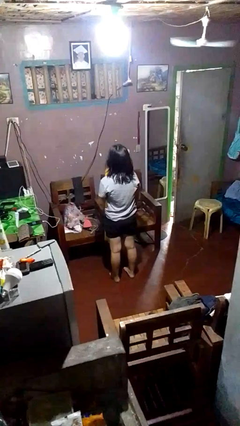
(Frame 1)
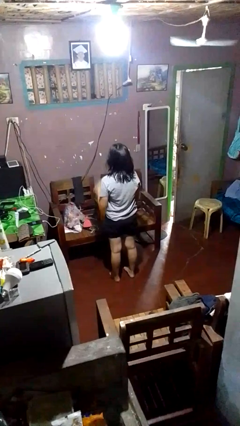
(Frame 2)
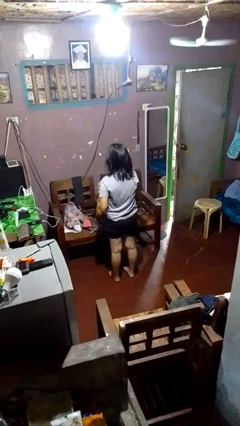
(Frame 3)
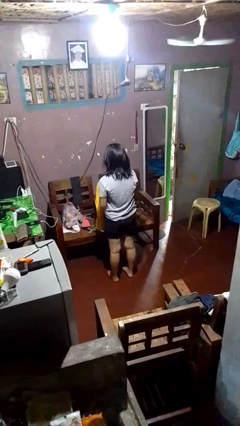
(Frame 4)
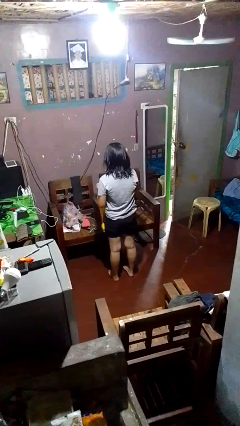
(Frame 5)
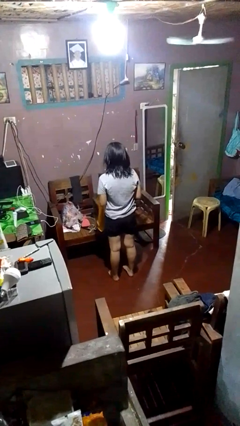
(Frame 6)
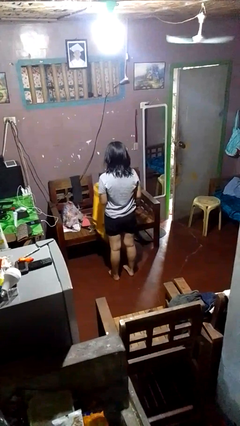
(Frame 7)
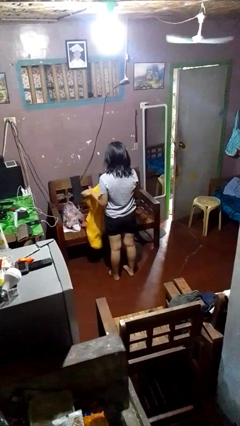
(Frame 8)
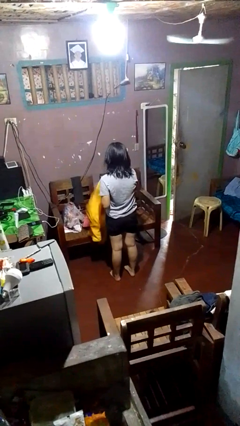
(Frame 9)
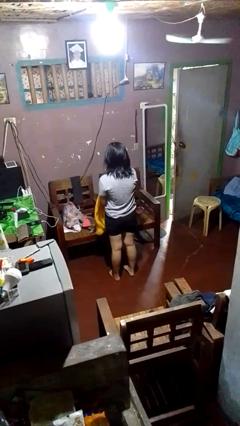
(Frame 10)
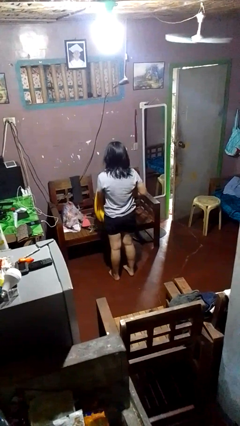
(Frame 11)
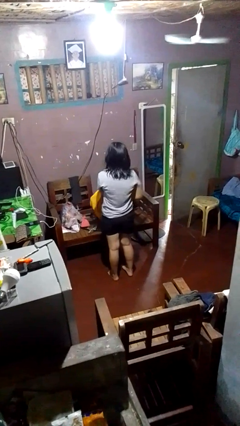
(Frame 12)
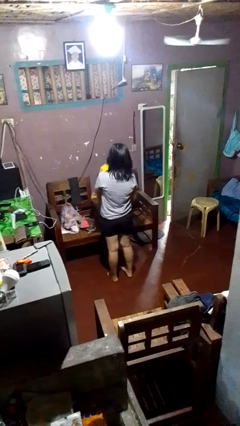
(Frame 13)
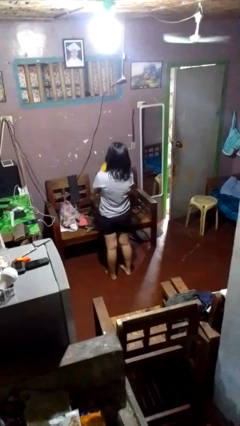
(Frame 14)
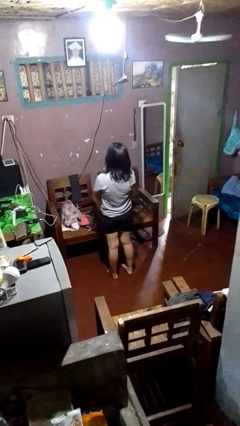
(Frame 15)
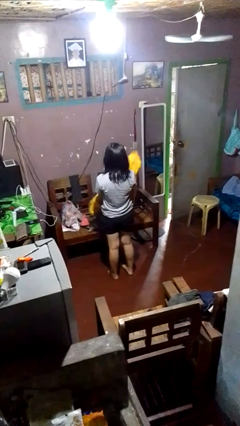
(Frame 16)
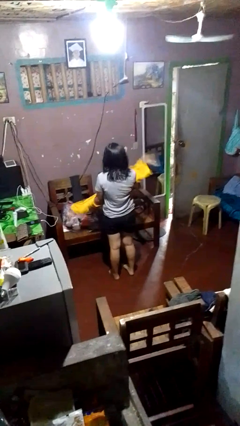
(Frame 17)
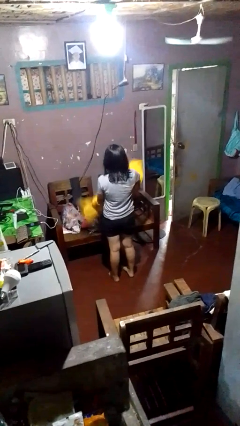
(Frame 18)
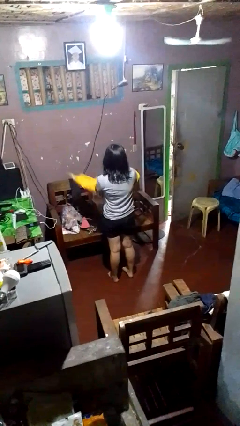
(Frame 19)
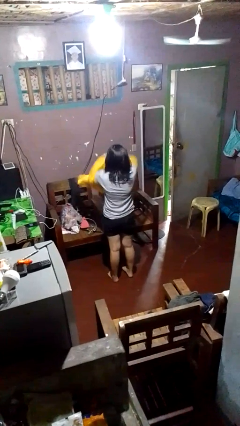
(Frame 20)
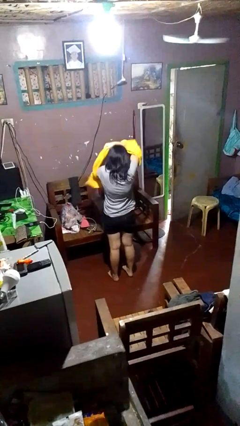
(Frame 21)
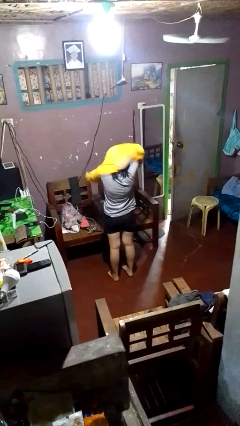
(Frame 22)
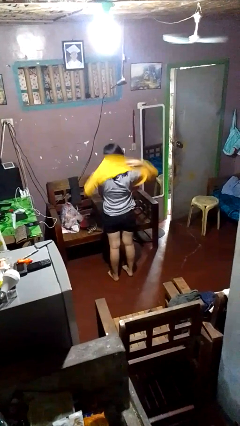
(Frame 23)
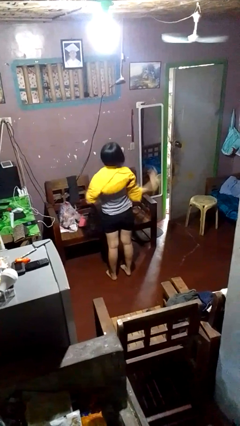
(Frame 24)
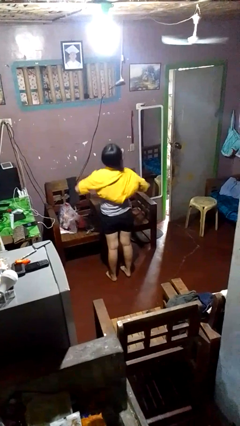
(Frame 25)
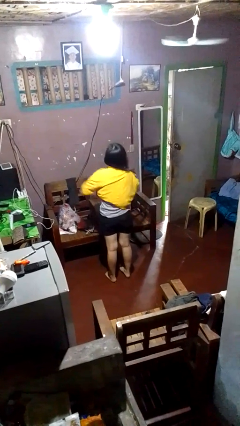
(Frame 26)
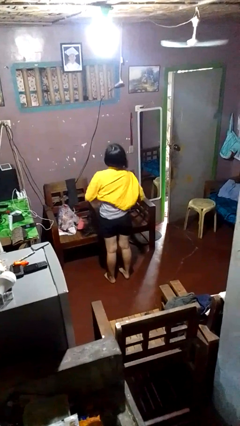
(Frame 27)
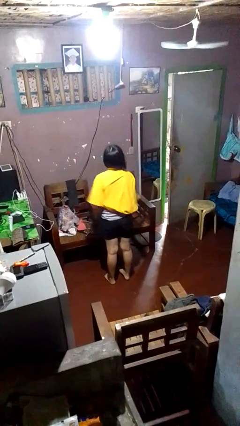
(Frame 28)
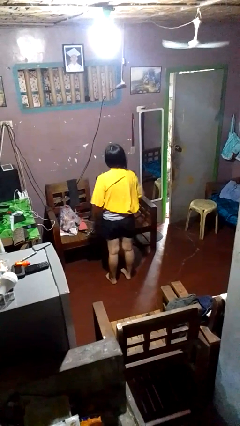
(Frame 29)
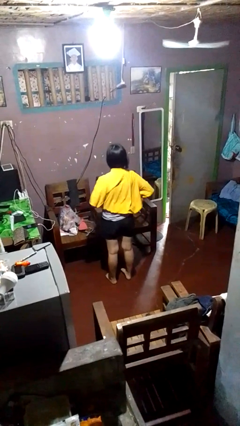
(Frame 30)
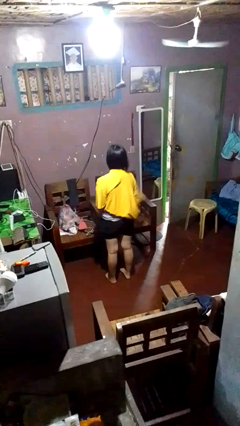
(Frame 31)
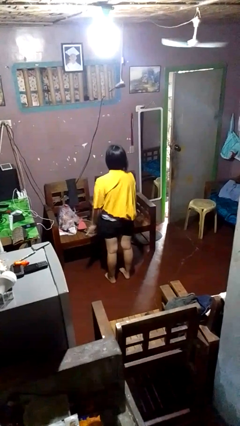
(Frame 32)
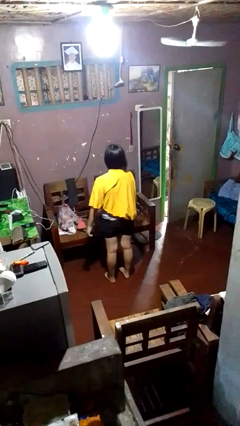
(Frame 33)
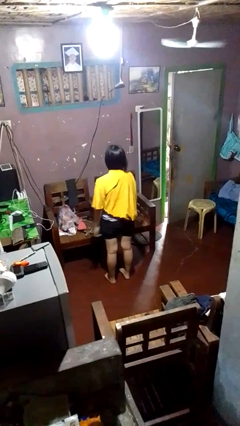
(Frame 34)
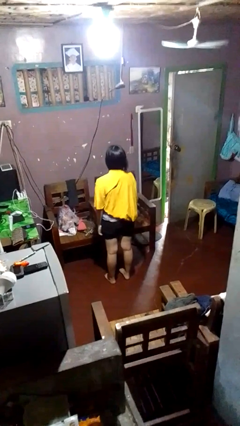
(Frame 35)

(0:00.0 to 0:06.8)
person puts on shirt

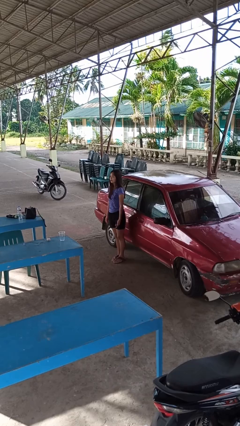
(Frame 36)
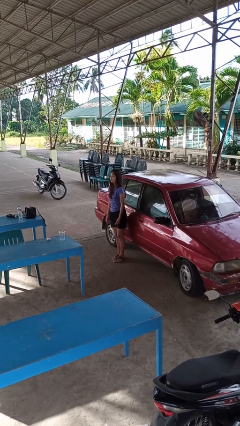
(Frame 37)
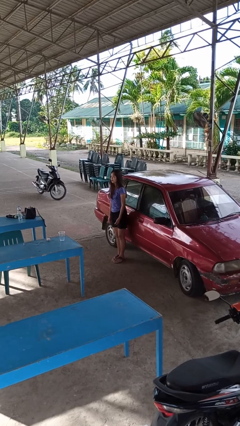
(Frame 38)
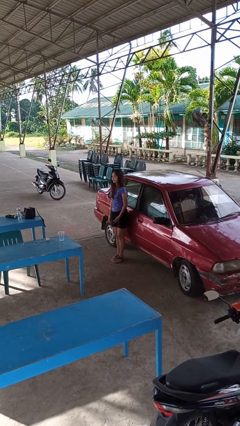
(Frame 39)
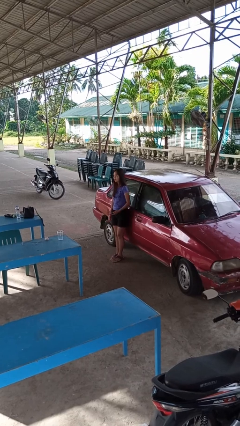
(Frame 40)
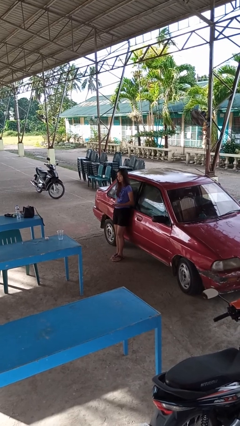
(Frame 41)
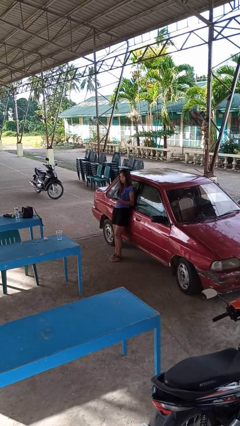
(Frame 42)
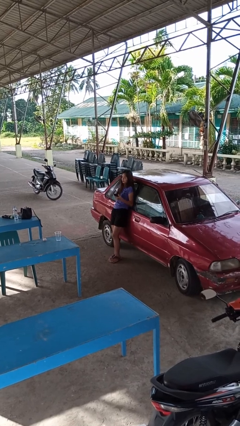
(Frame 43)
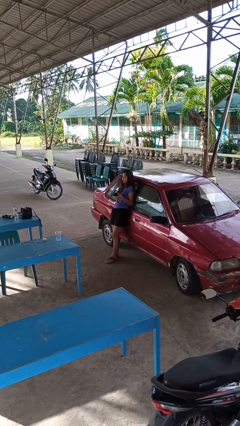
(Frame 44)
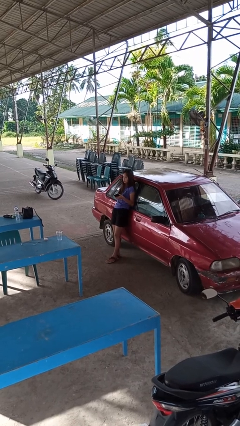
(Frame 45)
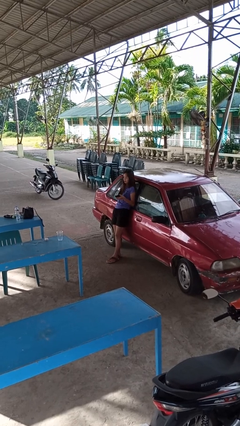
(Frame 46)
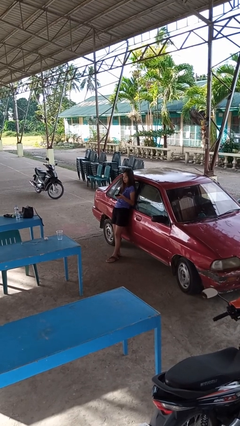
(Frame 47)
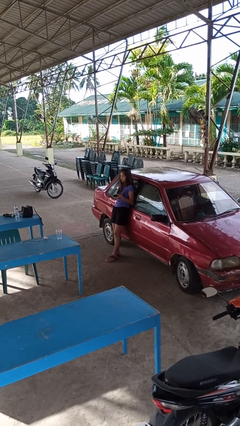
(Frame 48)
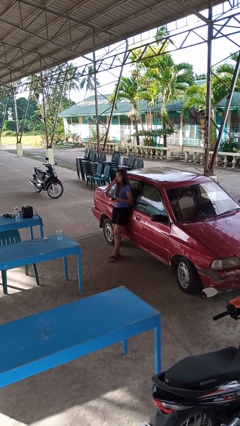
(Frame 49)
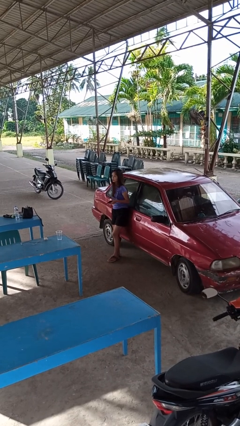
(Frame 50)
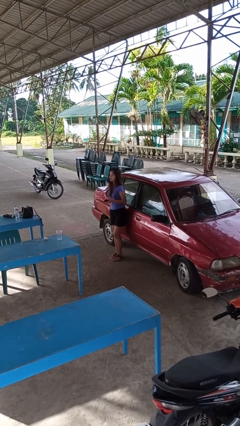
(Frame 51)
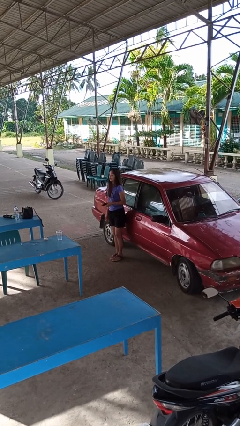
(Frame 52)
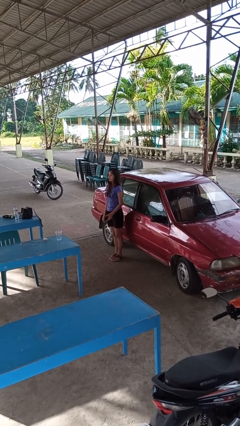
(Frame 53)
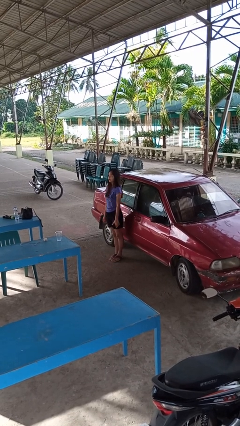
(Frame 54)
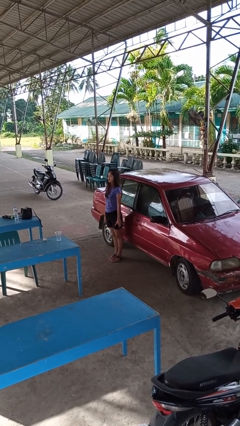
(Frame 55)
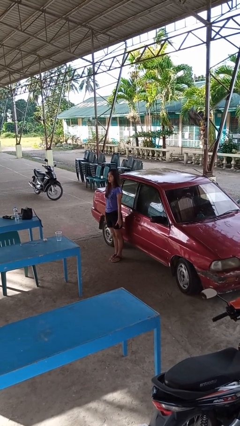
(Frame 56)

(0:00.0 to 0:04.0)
person leans against car

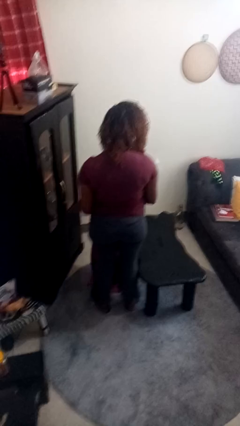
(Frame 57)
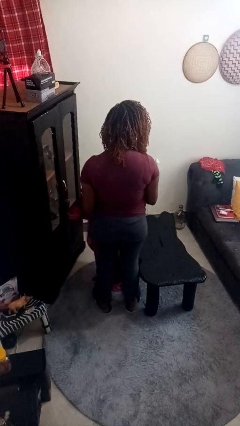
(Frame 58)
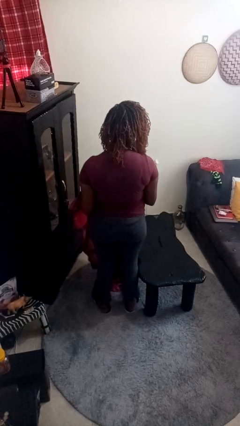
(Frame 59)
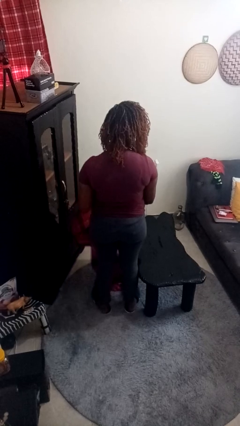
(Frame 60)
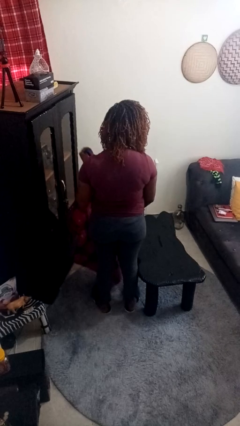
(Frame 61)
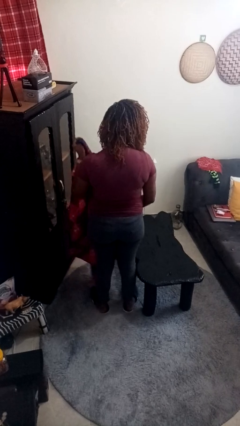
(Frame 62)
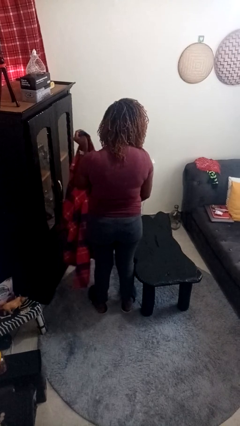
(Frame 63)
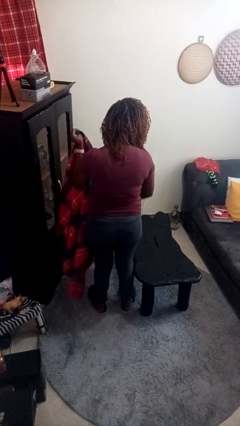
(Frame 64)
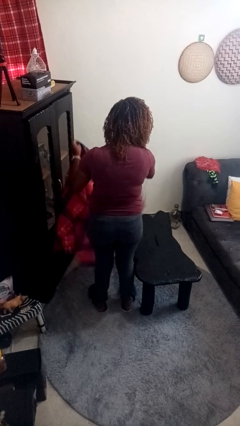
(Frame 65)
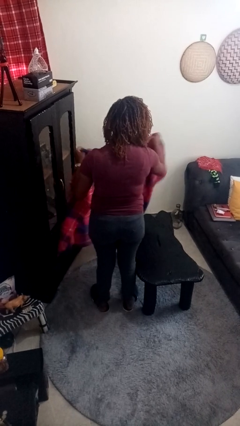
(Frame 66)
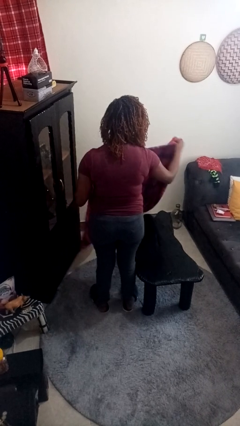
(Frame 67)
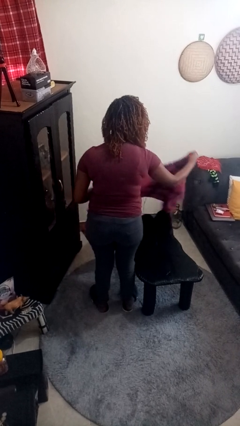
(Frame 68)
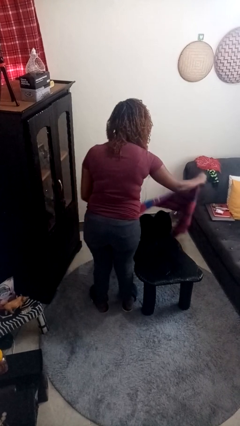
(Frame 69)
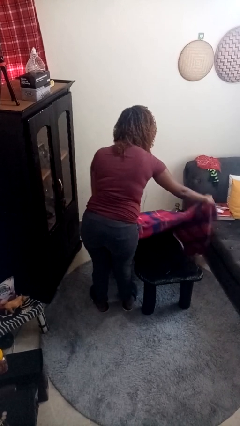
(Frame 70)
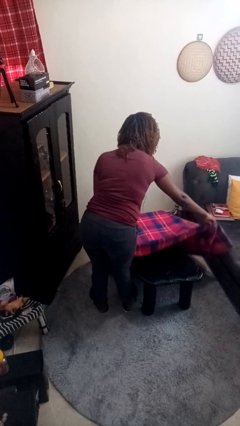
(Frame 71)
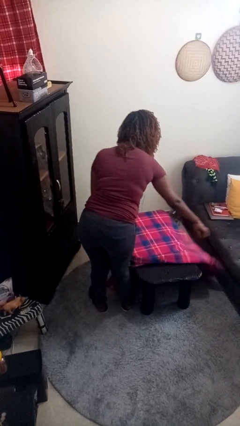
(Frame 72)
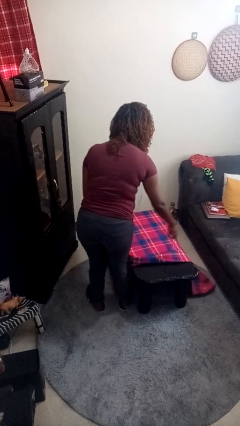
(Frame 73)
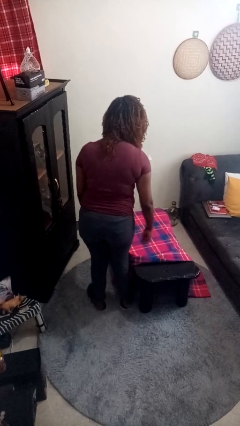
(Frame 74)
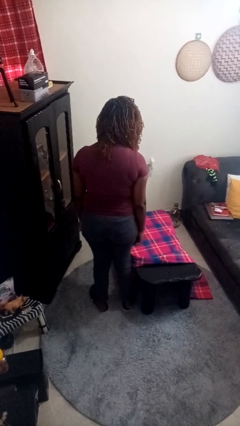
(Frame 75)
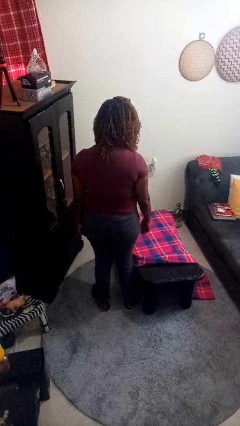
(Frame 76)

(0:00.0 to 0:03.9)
person spreads tablecloth

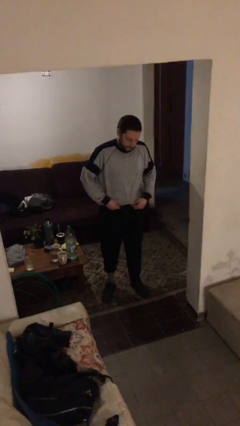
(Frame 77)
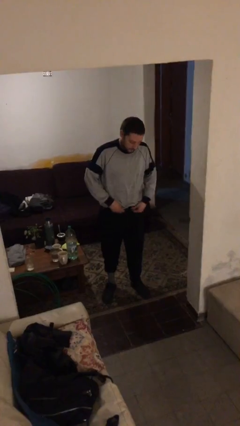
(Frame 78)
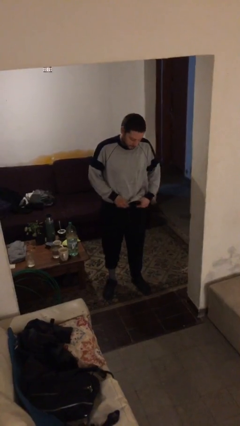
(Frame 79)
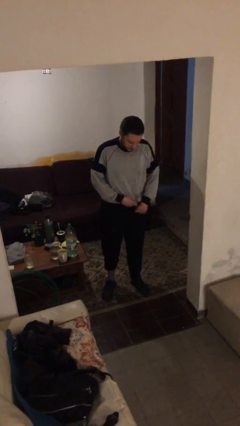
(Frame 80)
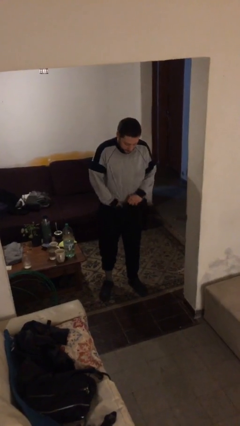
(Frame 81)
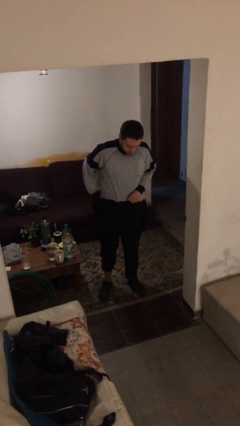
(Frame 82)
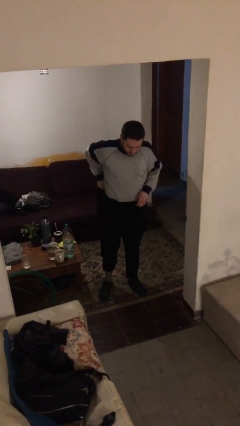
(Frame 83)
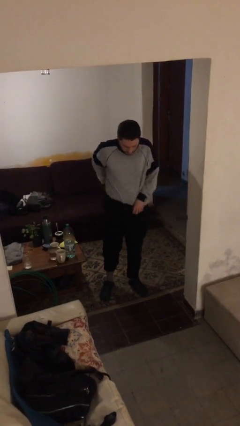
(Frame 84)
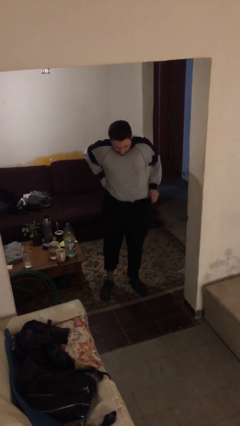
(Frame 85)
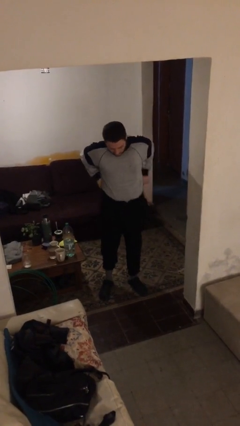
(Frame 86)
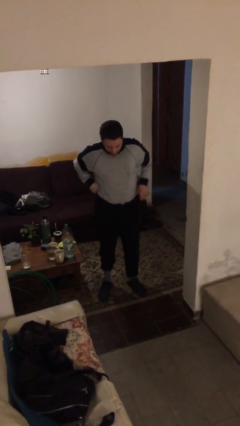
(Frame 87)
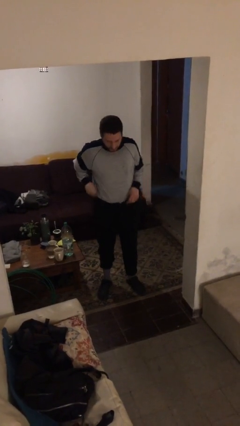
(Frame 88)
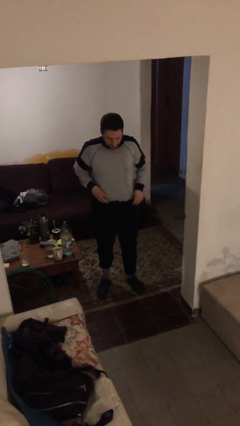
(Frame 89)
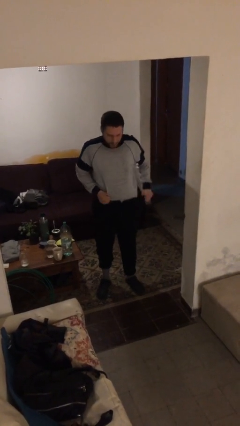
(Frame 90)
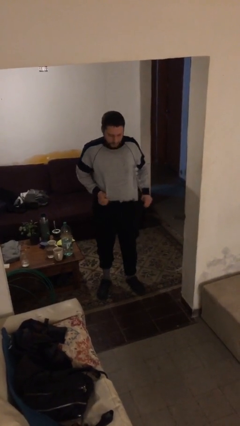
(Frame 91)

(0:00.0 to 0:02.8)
person tucks in shirt
